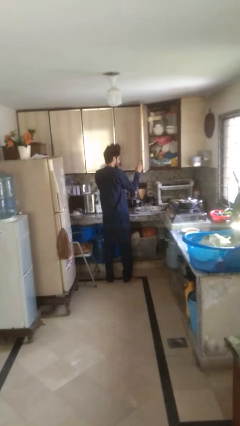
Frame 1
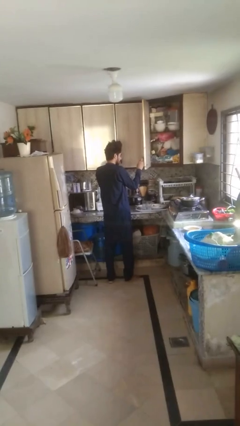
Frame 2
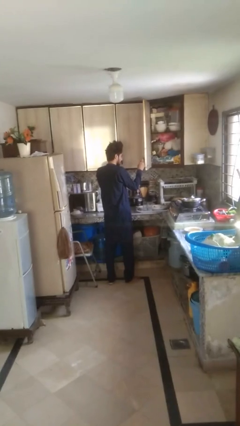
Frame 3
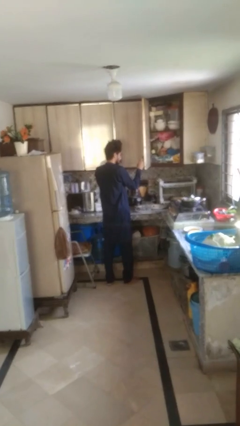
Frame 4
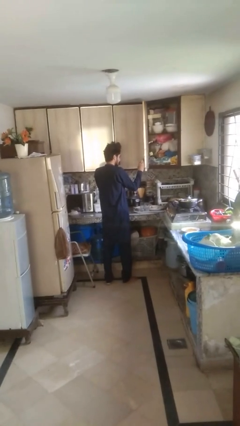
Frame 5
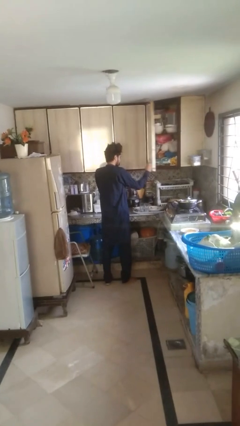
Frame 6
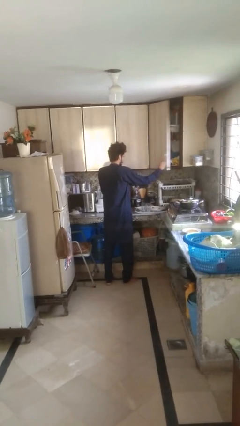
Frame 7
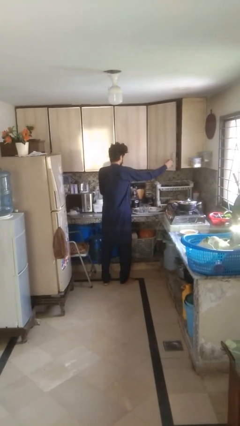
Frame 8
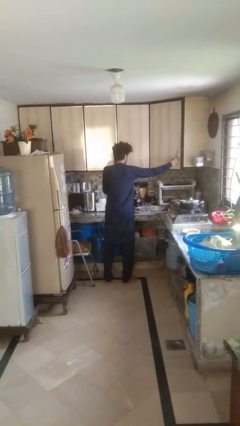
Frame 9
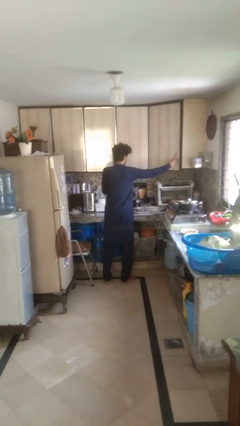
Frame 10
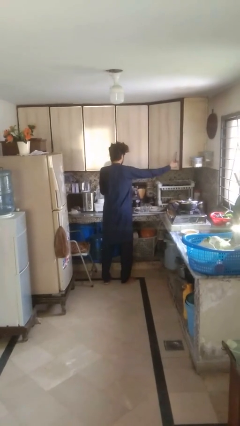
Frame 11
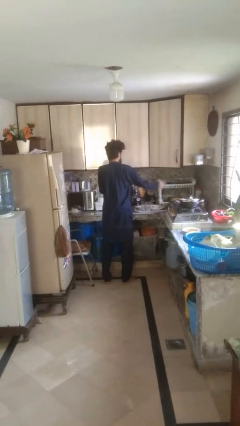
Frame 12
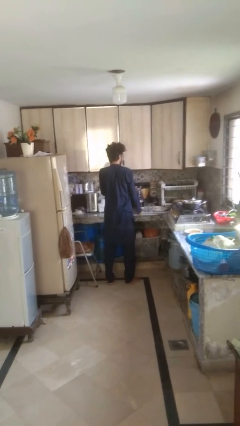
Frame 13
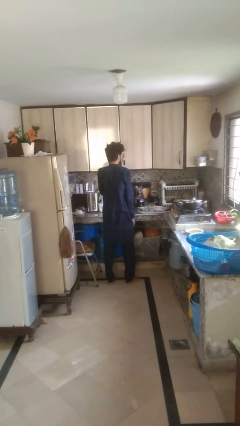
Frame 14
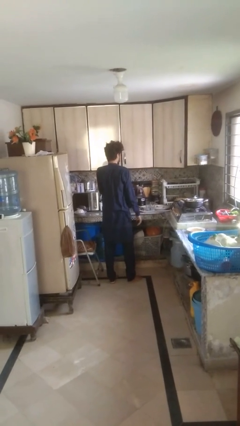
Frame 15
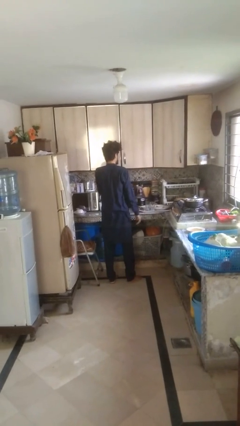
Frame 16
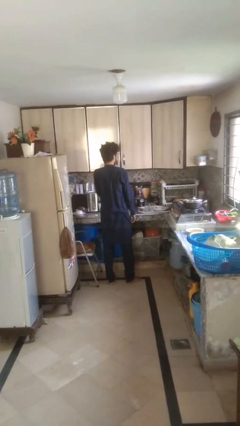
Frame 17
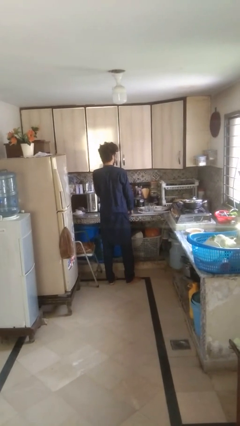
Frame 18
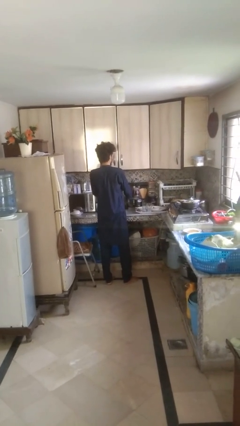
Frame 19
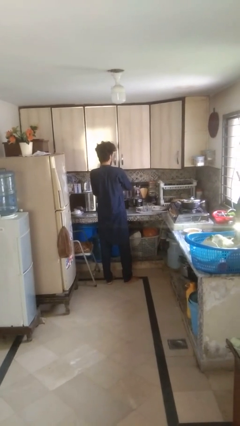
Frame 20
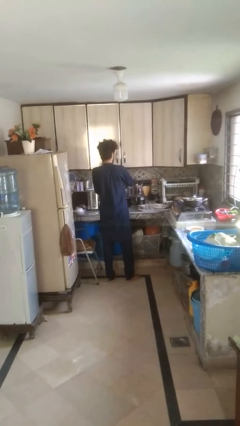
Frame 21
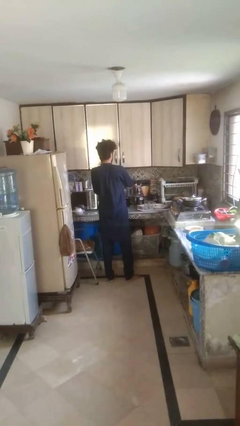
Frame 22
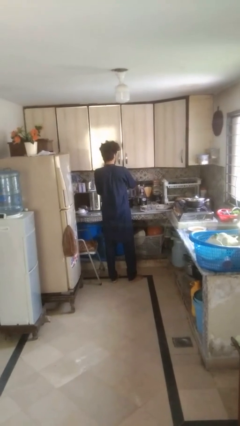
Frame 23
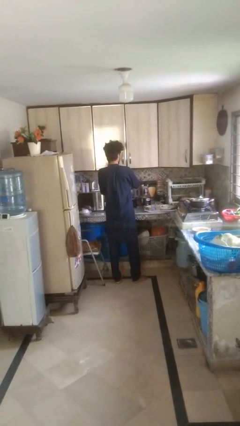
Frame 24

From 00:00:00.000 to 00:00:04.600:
person closes cabinet

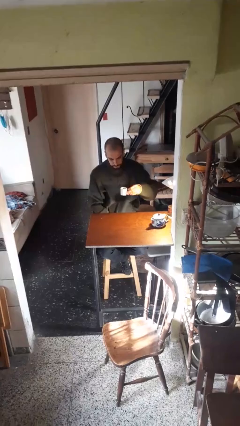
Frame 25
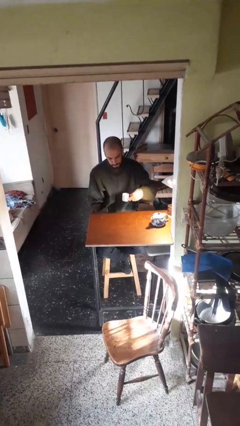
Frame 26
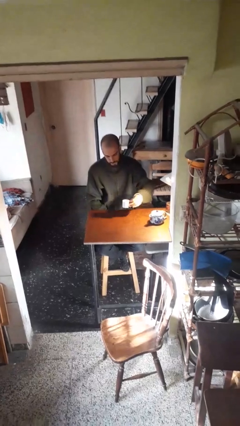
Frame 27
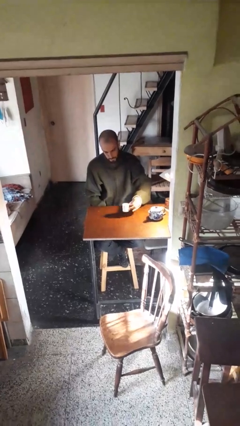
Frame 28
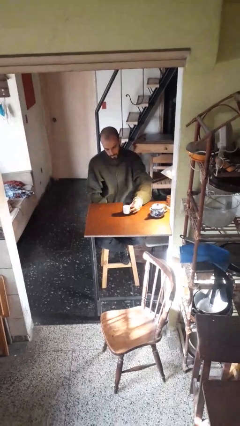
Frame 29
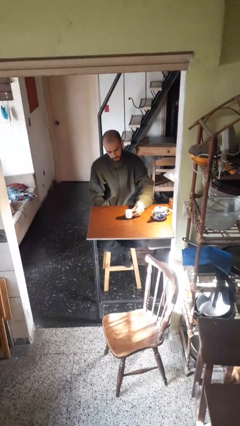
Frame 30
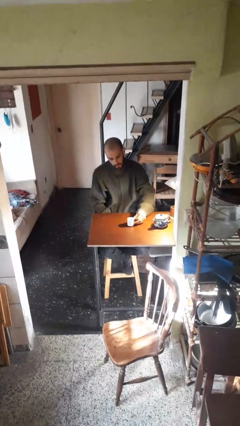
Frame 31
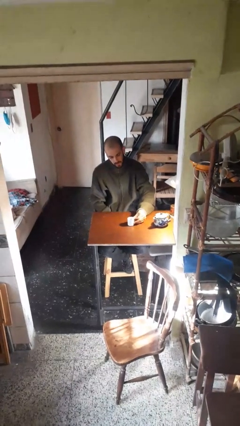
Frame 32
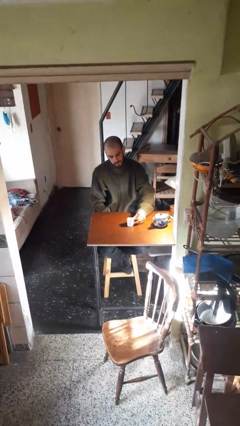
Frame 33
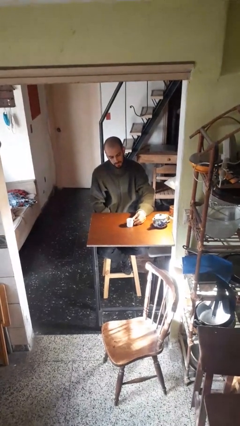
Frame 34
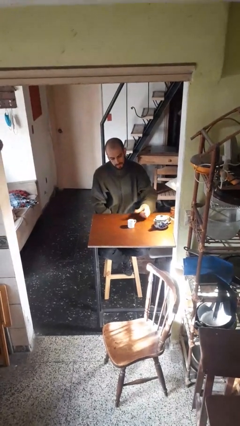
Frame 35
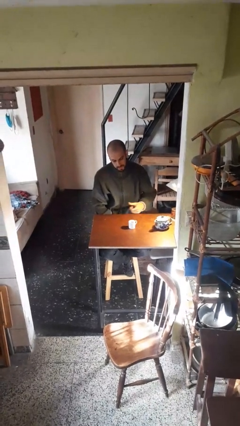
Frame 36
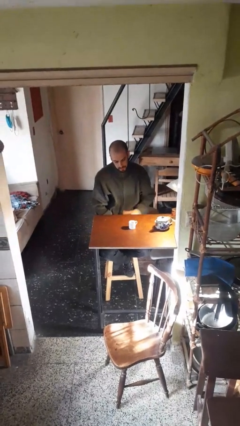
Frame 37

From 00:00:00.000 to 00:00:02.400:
person puts down object on table

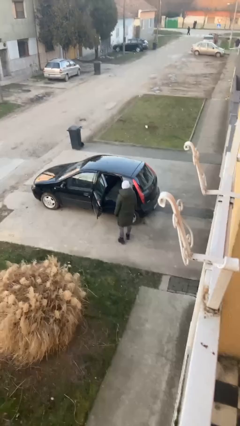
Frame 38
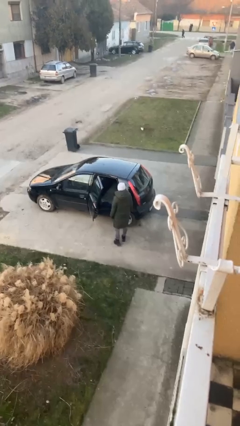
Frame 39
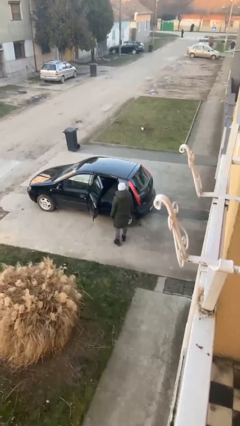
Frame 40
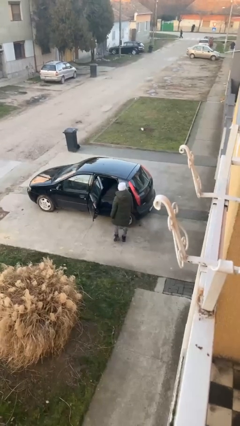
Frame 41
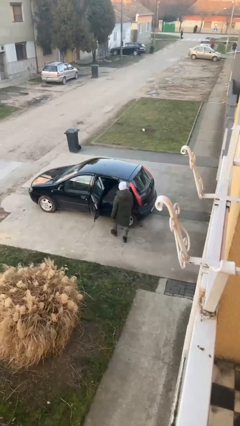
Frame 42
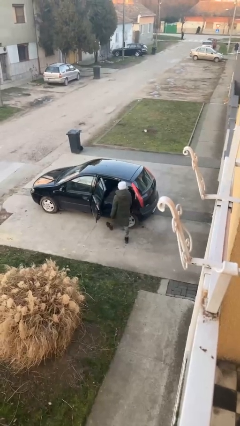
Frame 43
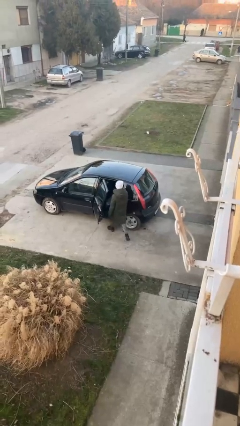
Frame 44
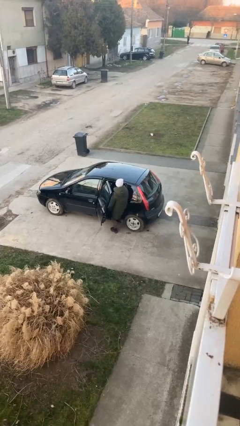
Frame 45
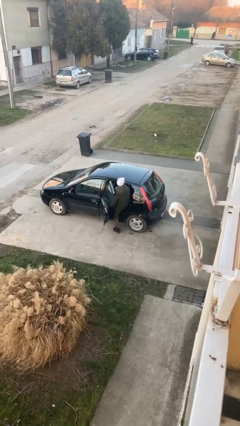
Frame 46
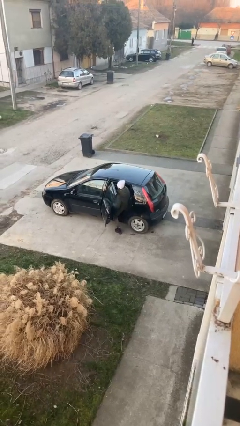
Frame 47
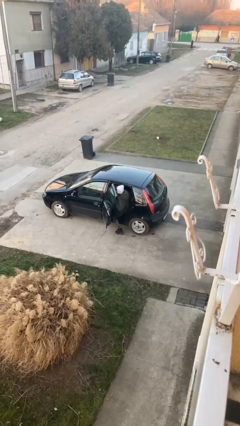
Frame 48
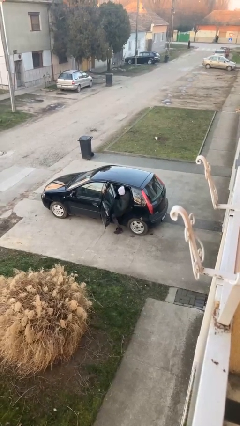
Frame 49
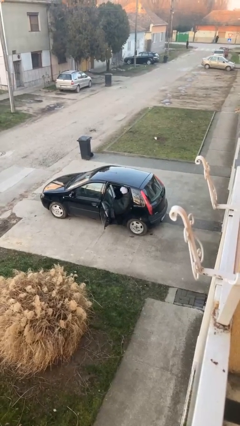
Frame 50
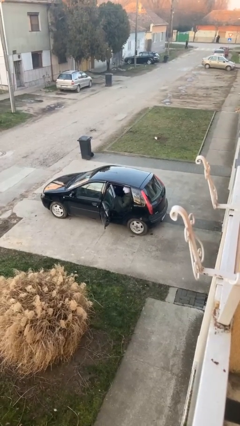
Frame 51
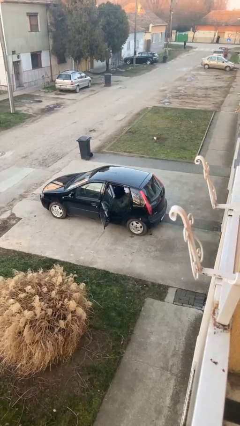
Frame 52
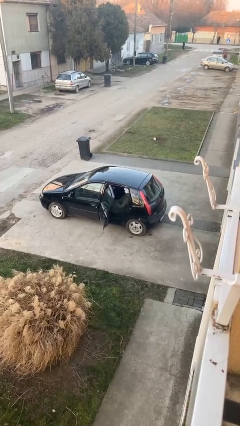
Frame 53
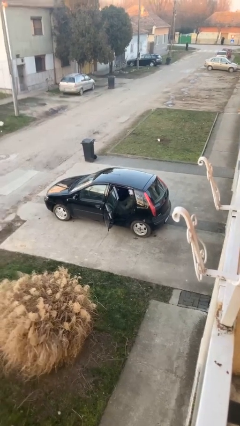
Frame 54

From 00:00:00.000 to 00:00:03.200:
person enters car

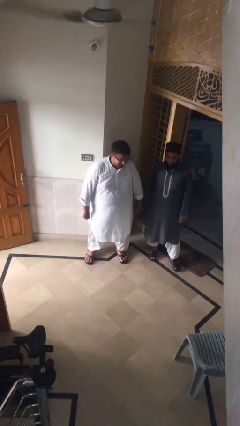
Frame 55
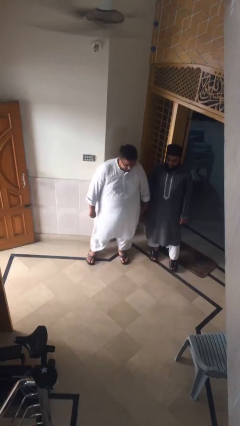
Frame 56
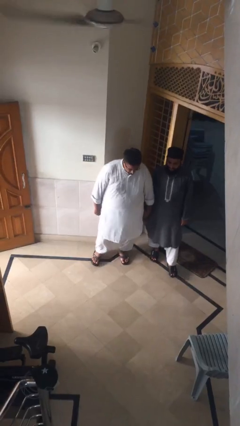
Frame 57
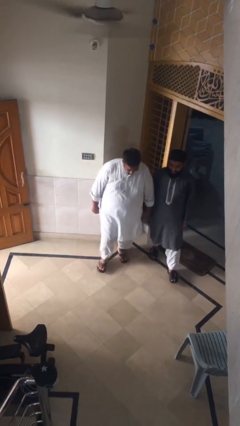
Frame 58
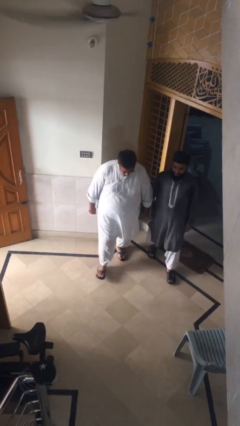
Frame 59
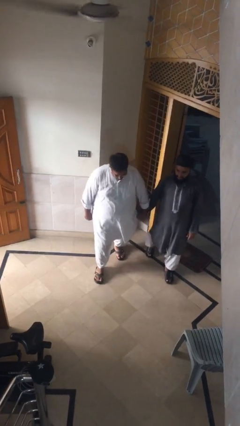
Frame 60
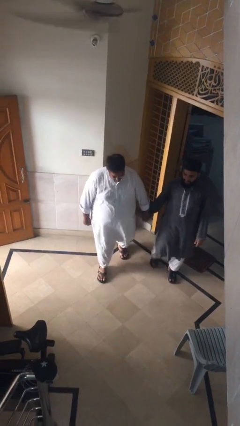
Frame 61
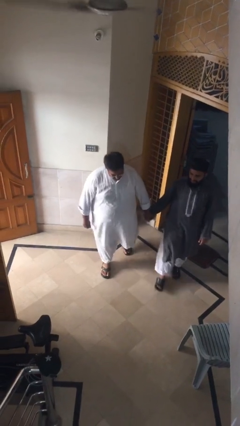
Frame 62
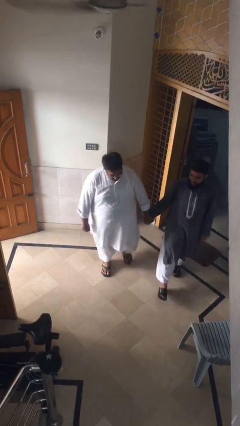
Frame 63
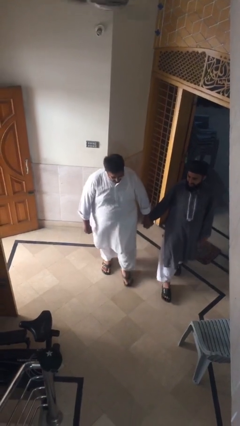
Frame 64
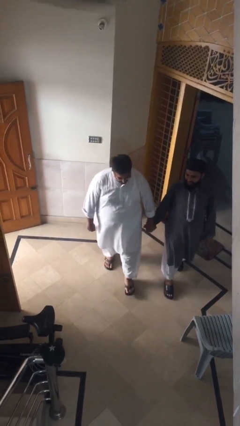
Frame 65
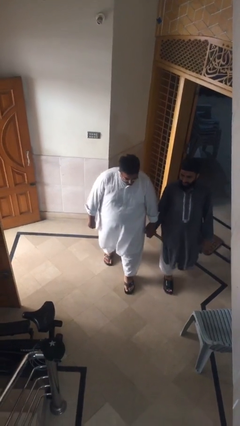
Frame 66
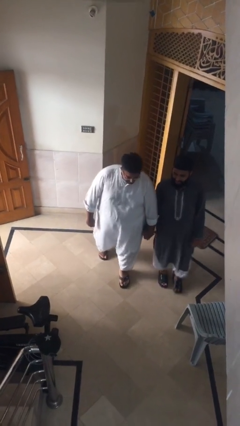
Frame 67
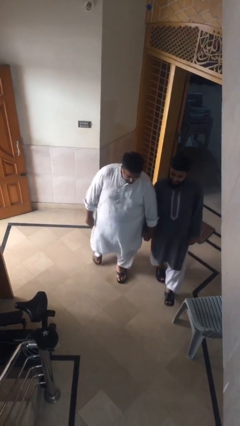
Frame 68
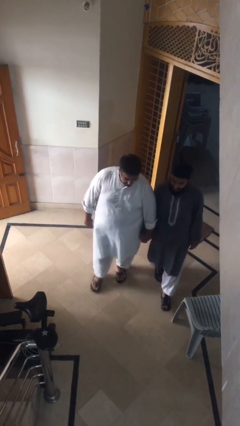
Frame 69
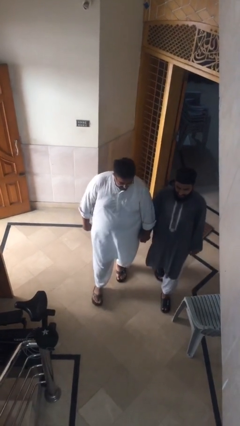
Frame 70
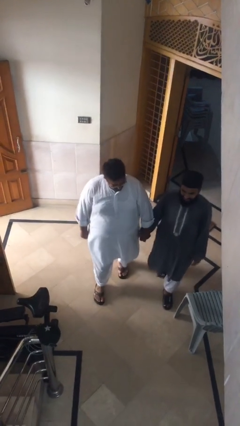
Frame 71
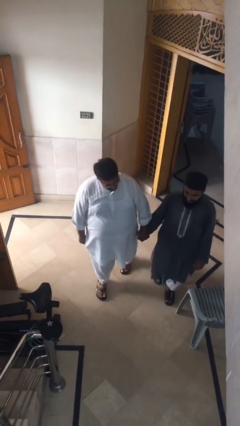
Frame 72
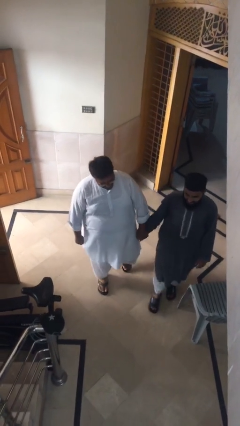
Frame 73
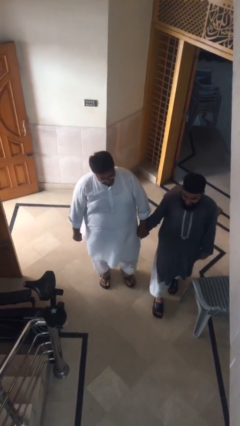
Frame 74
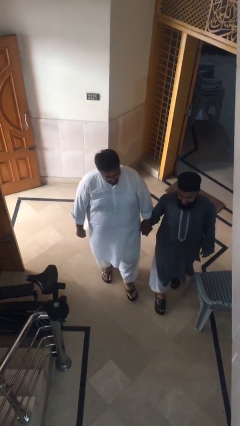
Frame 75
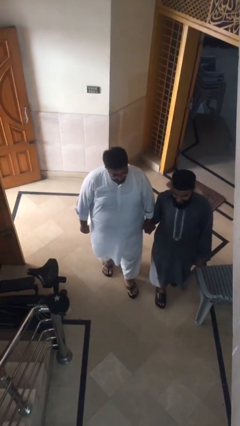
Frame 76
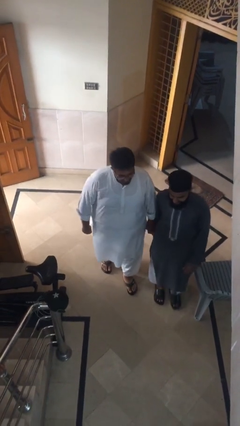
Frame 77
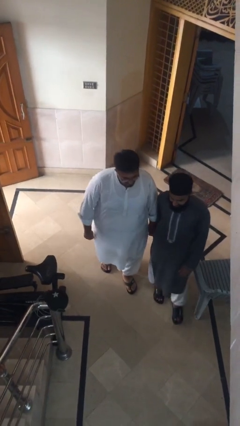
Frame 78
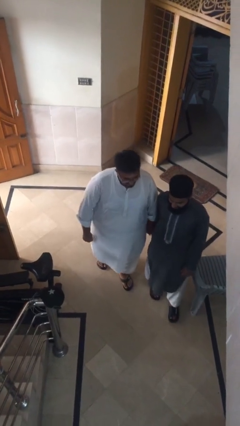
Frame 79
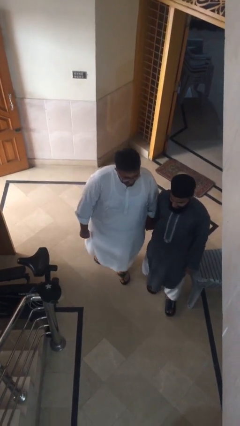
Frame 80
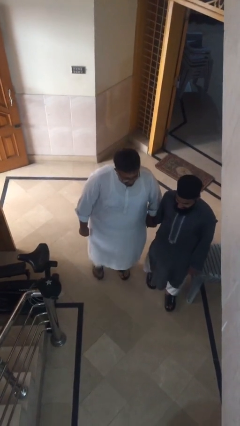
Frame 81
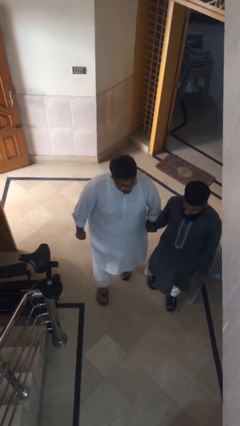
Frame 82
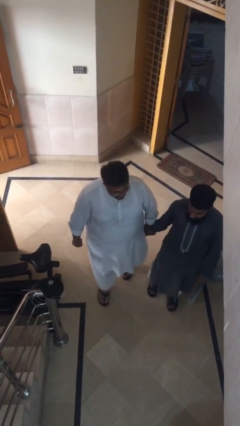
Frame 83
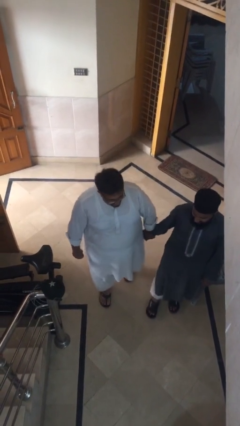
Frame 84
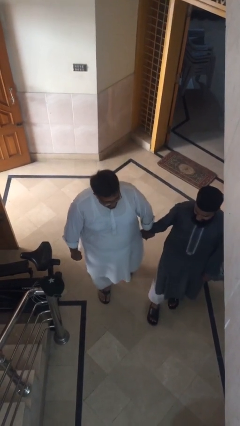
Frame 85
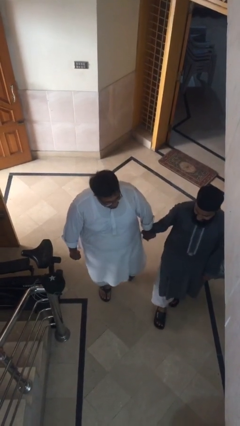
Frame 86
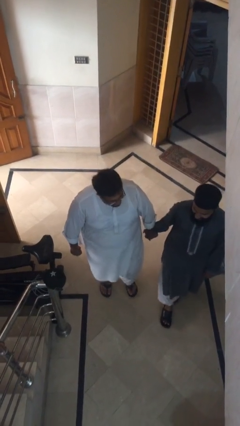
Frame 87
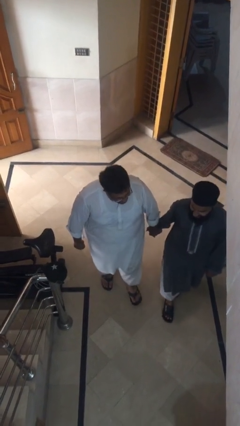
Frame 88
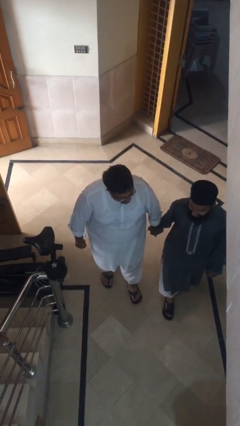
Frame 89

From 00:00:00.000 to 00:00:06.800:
person holds hand
